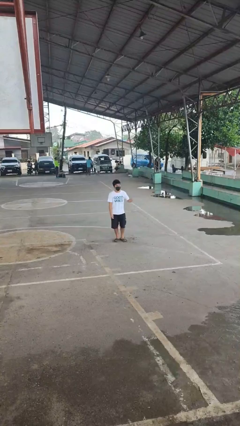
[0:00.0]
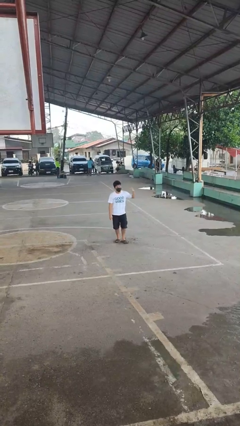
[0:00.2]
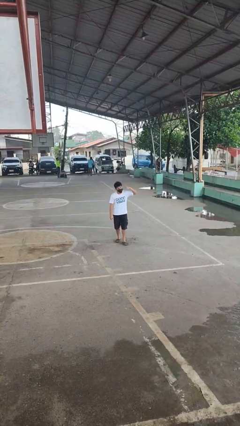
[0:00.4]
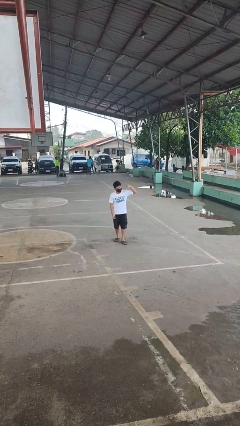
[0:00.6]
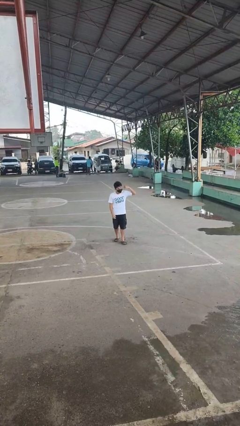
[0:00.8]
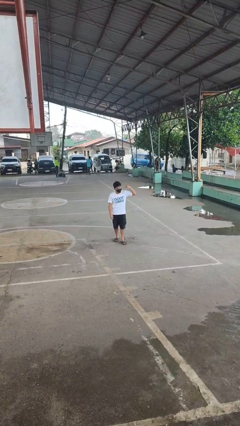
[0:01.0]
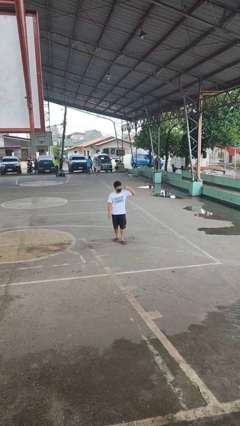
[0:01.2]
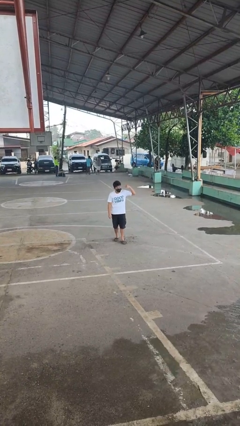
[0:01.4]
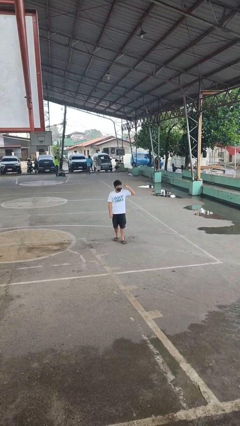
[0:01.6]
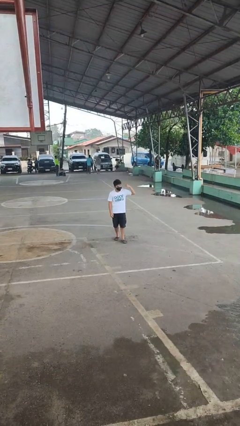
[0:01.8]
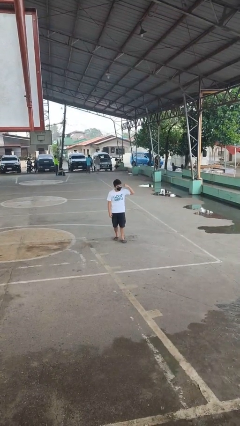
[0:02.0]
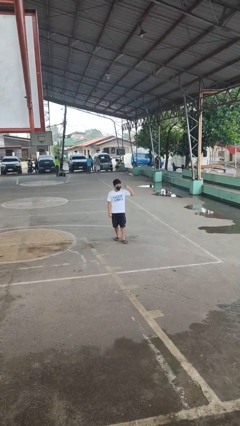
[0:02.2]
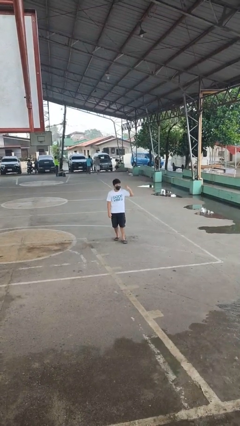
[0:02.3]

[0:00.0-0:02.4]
person gestures listen closely

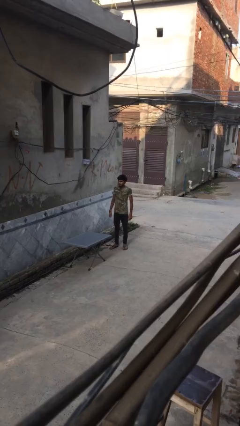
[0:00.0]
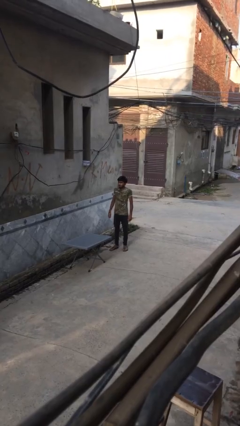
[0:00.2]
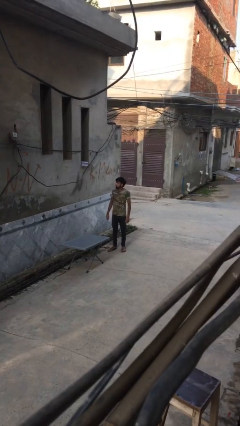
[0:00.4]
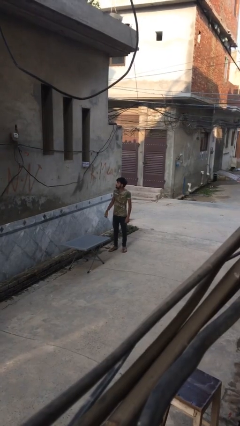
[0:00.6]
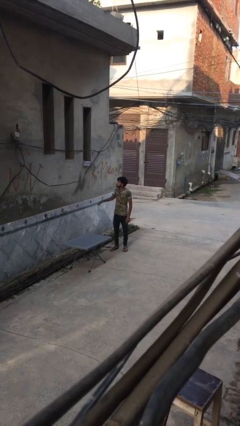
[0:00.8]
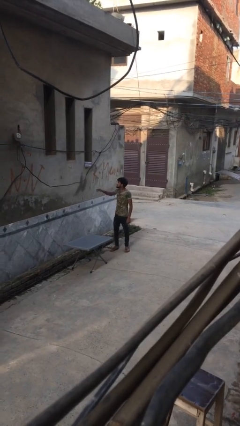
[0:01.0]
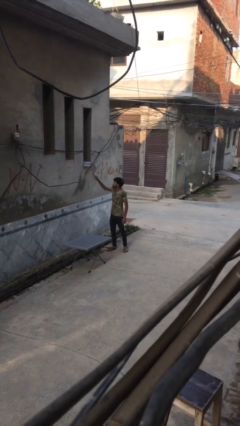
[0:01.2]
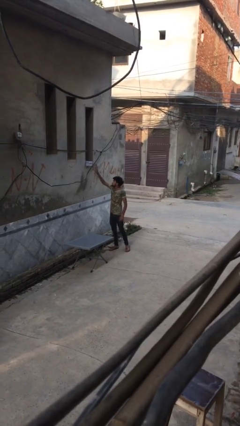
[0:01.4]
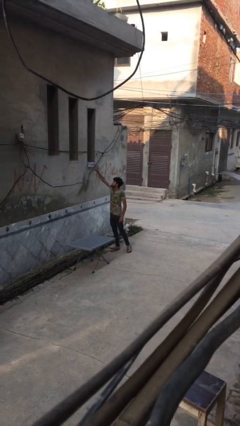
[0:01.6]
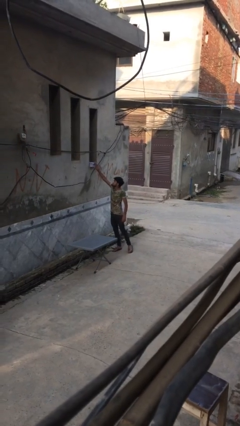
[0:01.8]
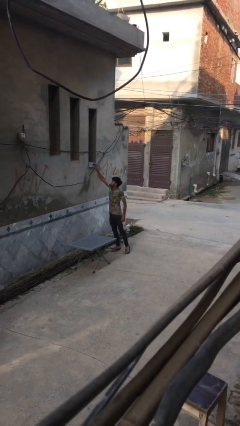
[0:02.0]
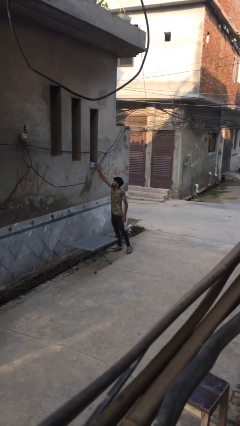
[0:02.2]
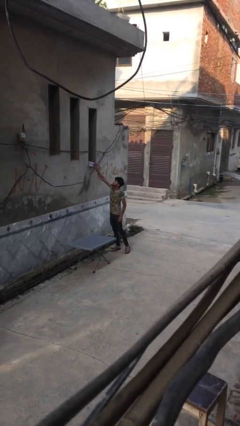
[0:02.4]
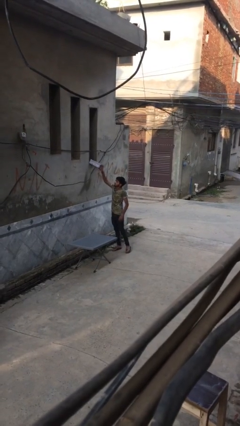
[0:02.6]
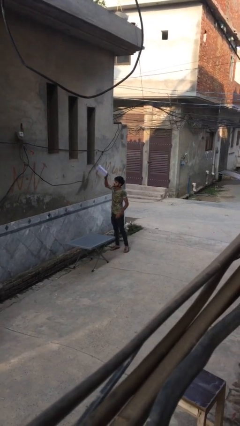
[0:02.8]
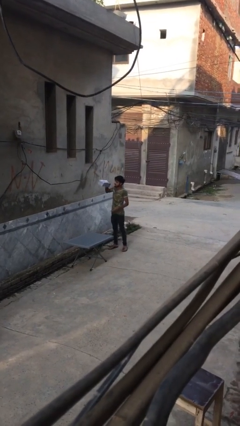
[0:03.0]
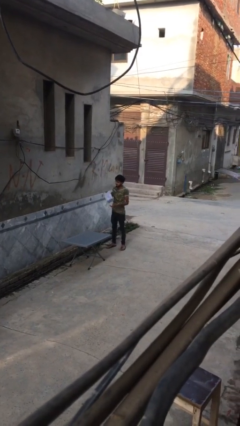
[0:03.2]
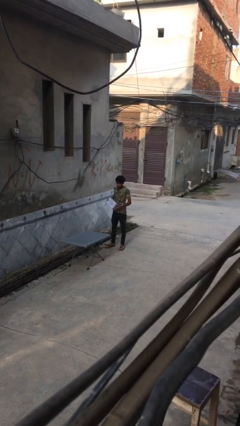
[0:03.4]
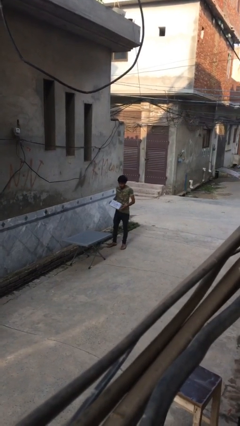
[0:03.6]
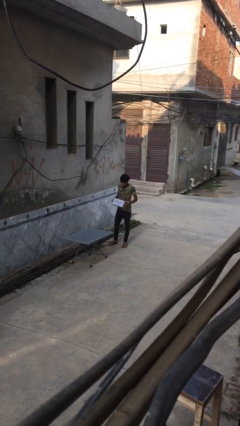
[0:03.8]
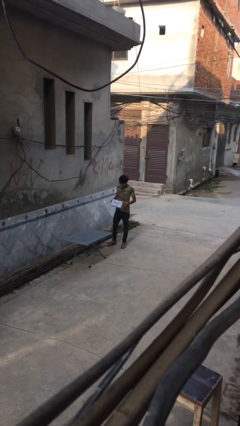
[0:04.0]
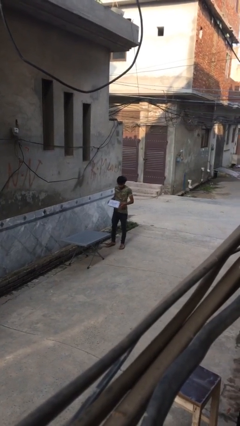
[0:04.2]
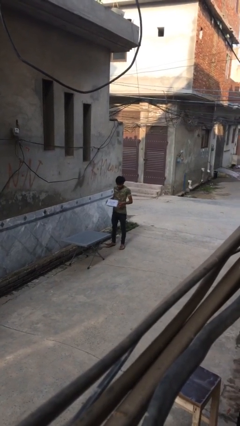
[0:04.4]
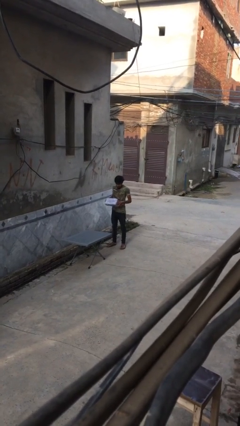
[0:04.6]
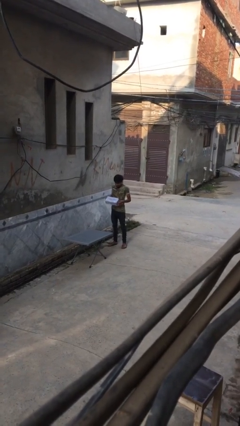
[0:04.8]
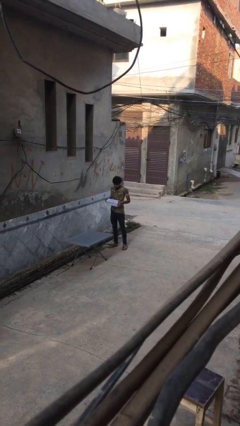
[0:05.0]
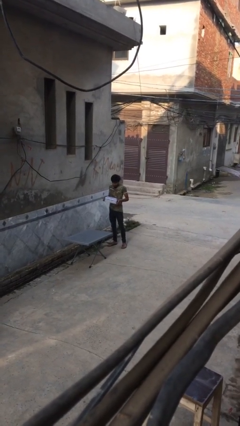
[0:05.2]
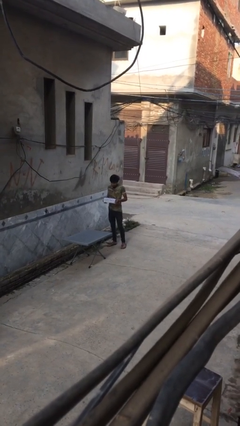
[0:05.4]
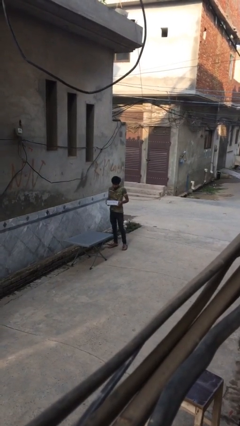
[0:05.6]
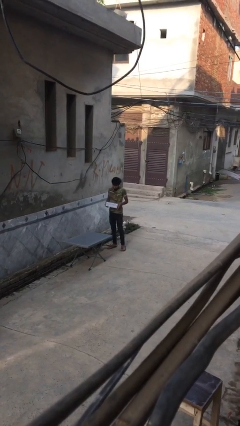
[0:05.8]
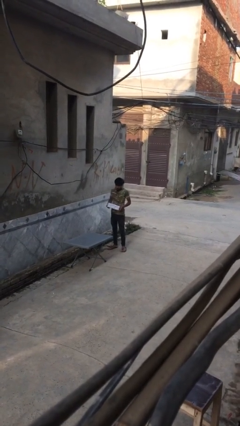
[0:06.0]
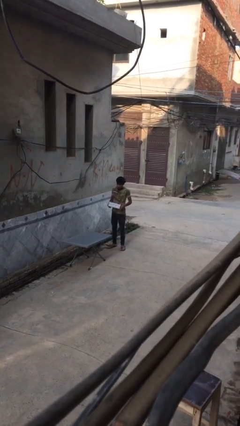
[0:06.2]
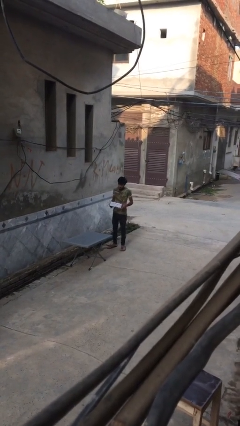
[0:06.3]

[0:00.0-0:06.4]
person picks up object from shelf

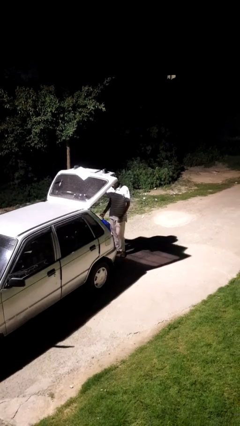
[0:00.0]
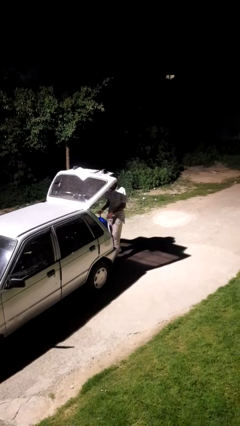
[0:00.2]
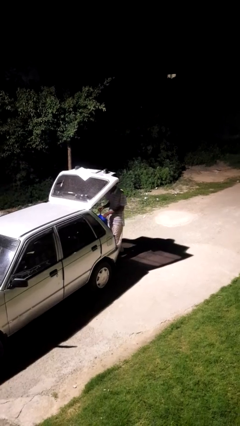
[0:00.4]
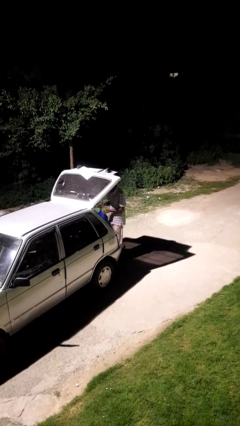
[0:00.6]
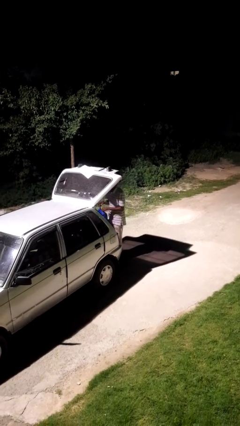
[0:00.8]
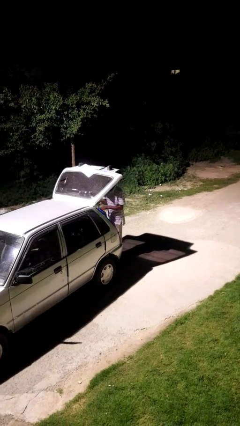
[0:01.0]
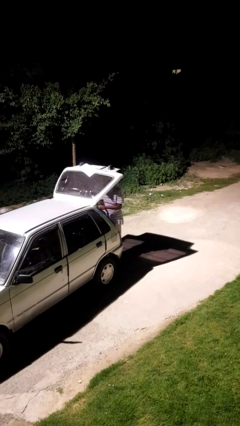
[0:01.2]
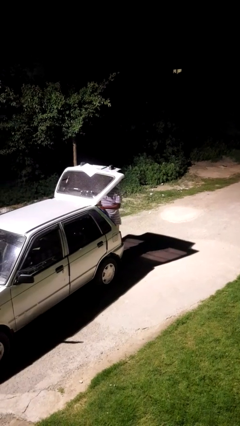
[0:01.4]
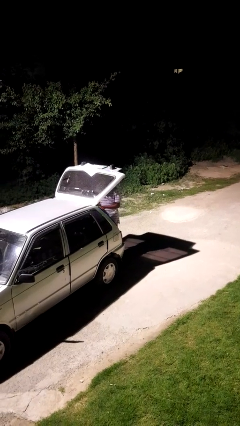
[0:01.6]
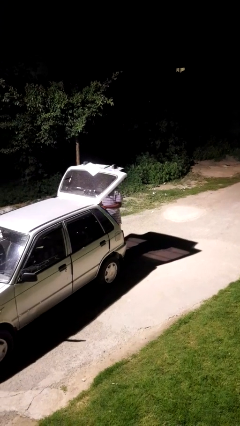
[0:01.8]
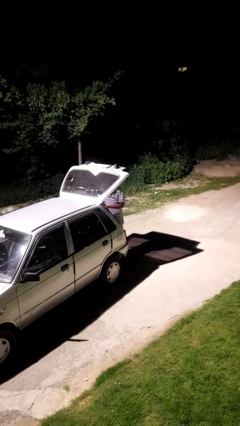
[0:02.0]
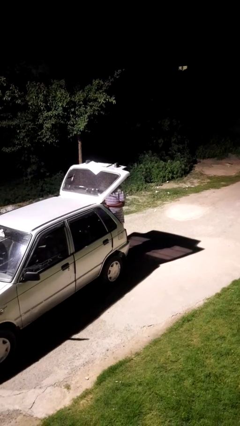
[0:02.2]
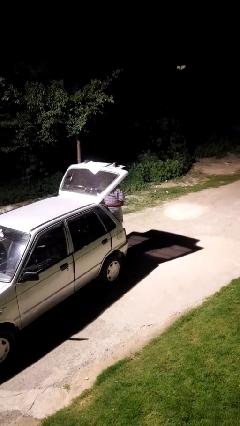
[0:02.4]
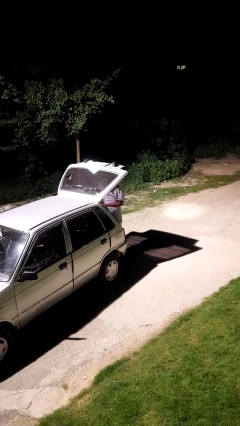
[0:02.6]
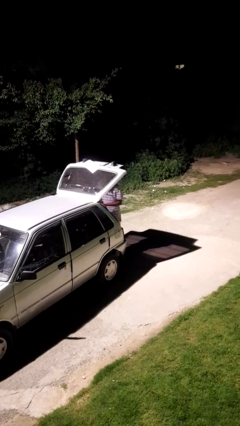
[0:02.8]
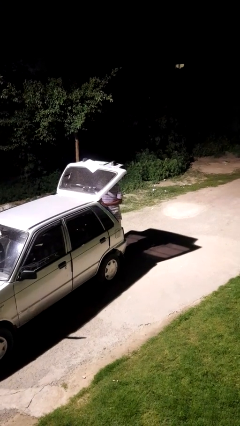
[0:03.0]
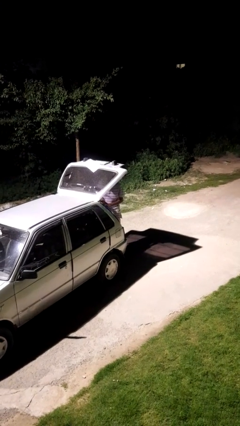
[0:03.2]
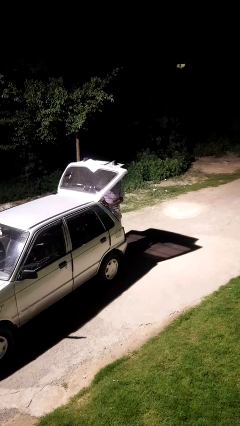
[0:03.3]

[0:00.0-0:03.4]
person loads car

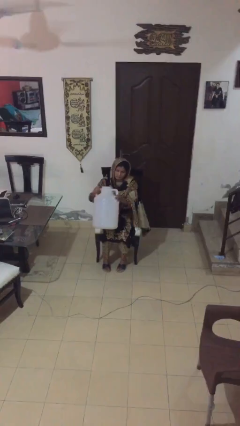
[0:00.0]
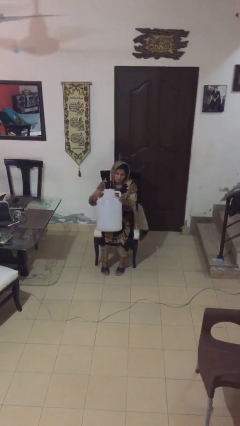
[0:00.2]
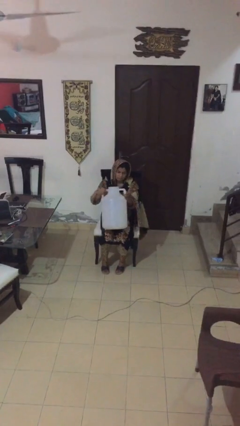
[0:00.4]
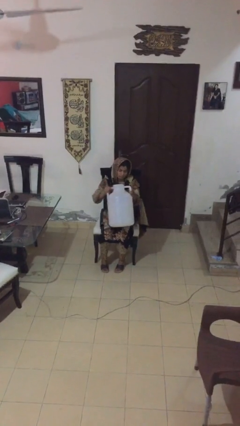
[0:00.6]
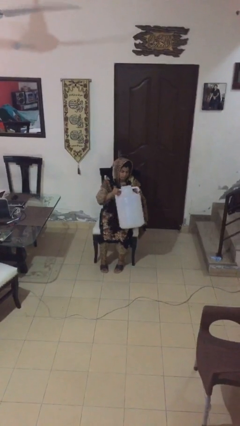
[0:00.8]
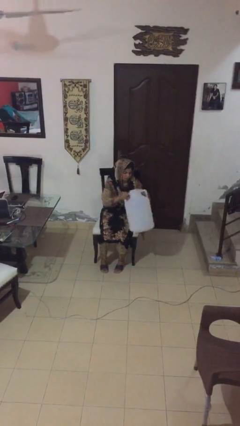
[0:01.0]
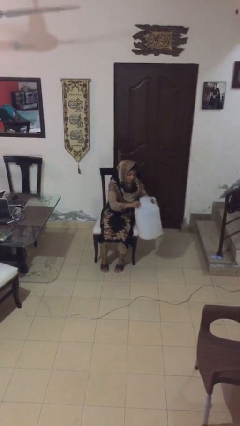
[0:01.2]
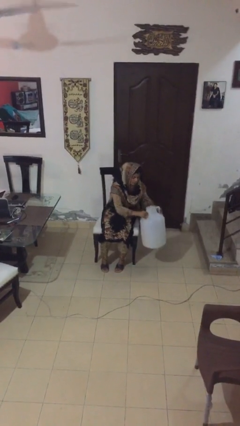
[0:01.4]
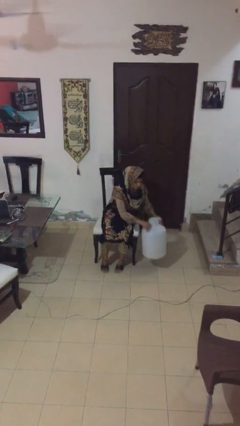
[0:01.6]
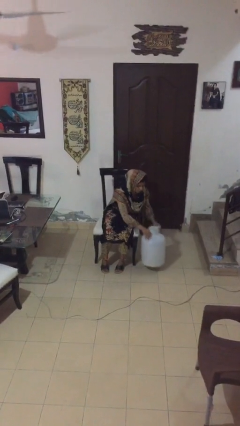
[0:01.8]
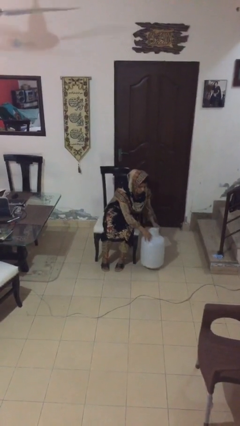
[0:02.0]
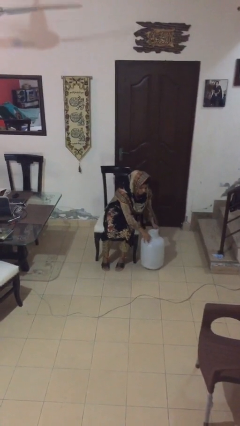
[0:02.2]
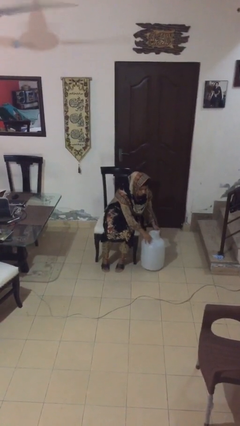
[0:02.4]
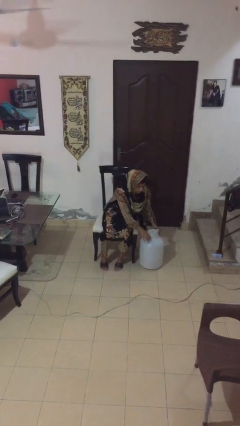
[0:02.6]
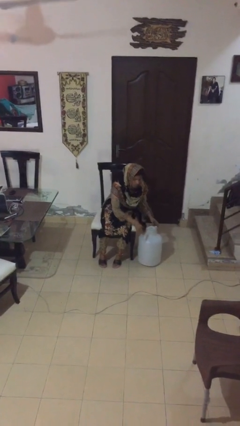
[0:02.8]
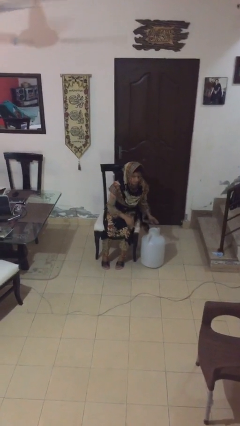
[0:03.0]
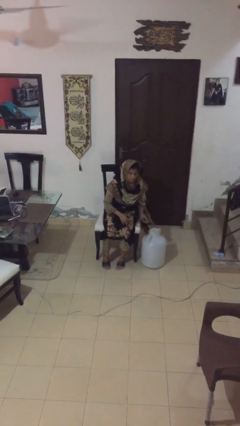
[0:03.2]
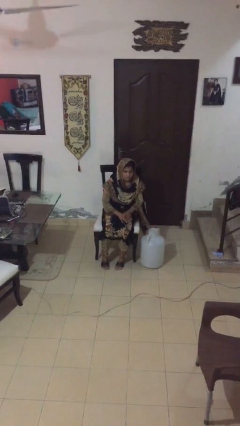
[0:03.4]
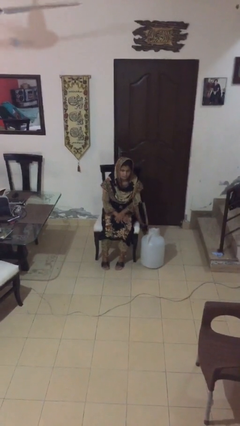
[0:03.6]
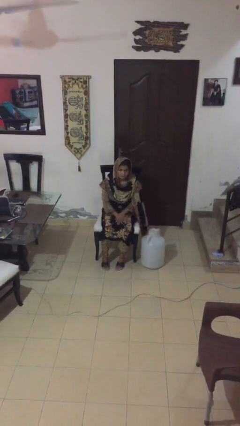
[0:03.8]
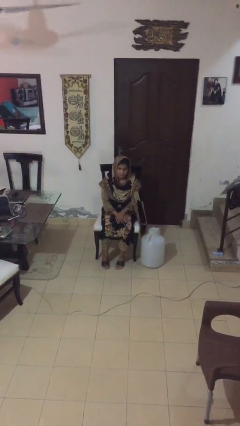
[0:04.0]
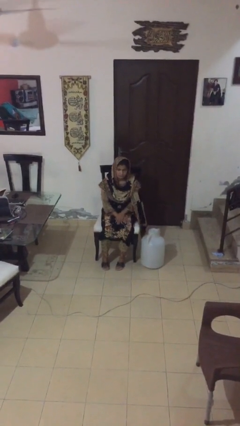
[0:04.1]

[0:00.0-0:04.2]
person puts down object on floor

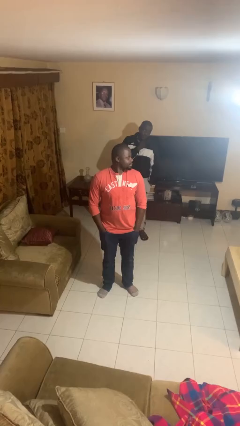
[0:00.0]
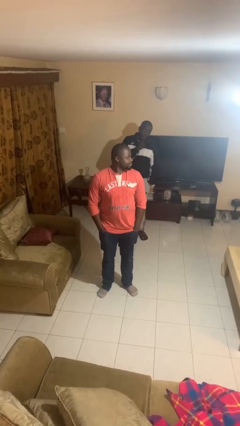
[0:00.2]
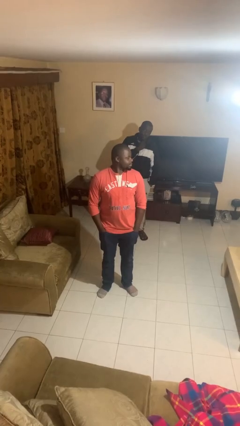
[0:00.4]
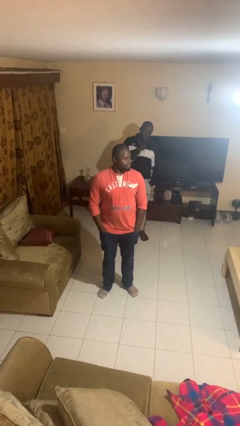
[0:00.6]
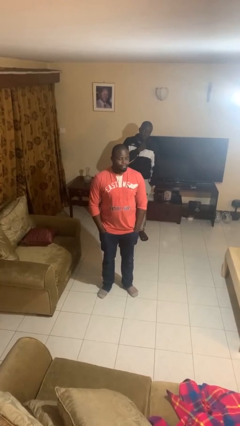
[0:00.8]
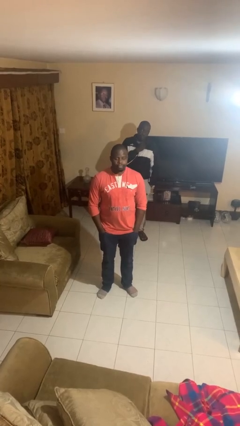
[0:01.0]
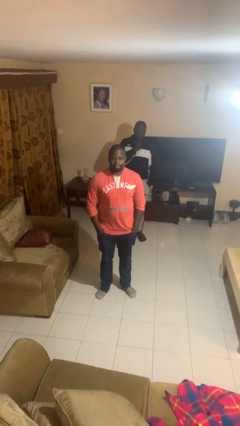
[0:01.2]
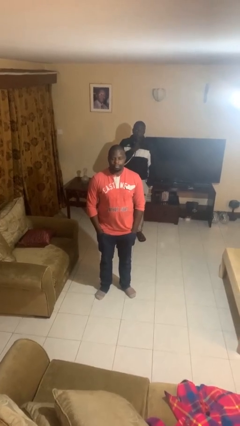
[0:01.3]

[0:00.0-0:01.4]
person looks over shoulder

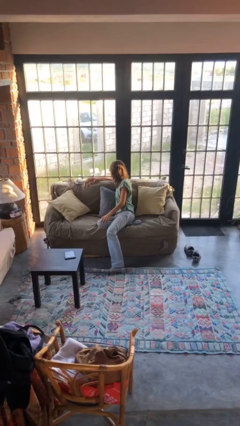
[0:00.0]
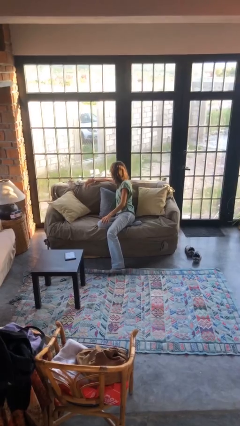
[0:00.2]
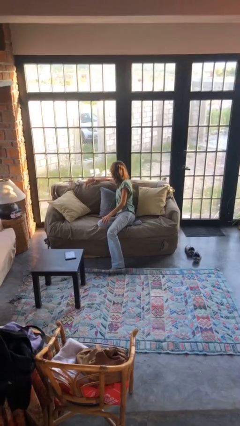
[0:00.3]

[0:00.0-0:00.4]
person stands up
